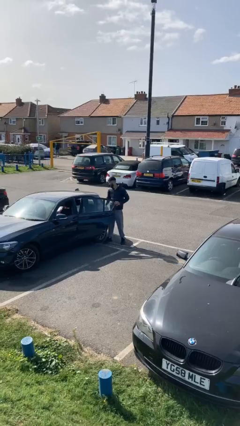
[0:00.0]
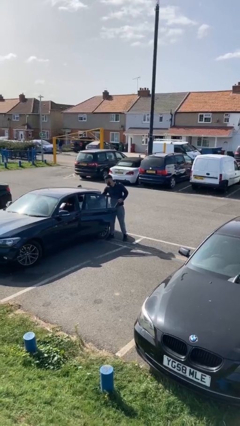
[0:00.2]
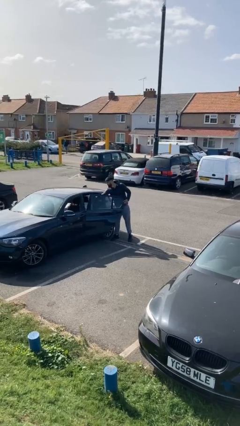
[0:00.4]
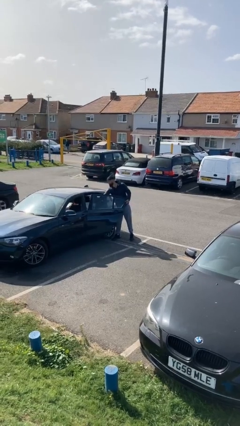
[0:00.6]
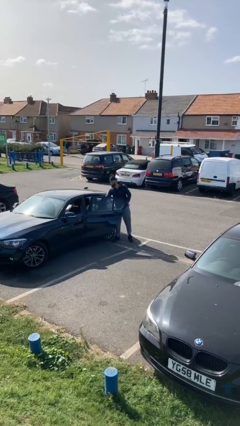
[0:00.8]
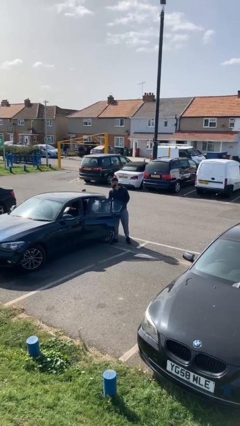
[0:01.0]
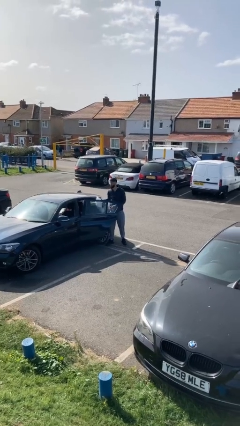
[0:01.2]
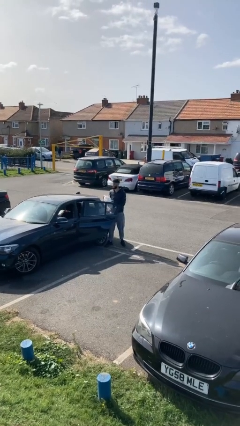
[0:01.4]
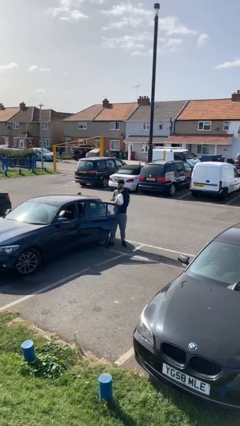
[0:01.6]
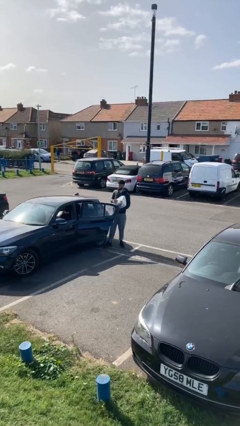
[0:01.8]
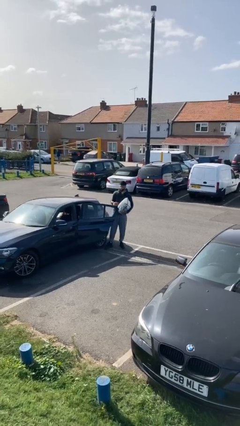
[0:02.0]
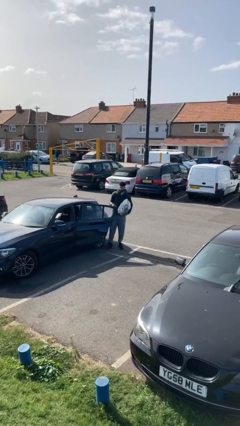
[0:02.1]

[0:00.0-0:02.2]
person unloads car

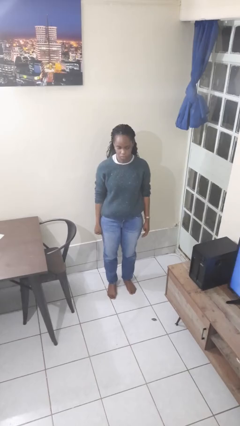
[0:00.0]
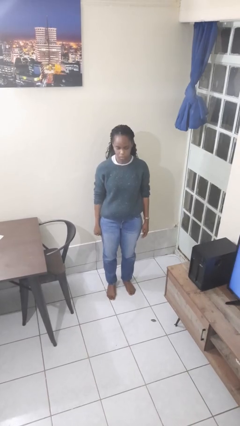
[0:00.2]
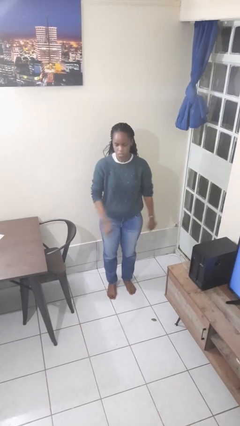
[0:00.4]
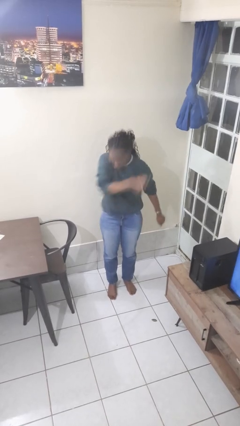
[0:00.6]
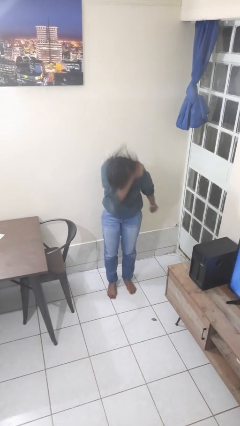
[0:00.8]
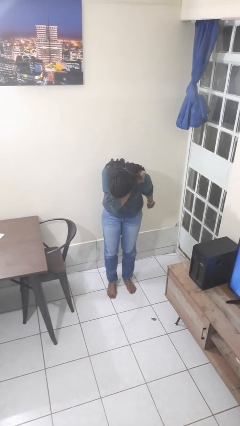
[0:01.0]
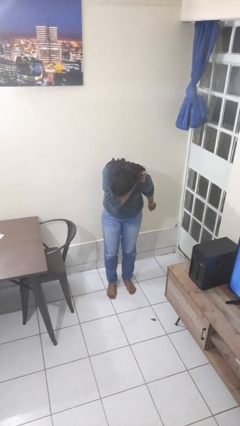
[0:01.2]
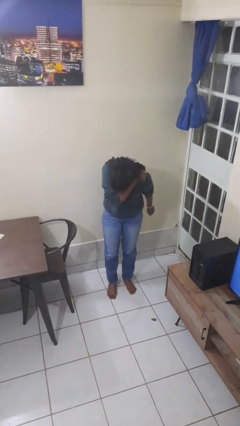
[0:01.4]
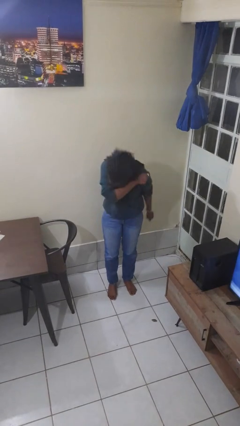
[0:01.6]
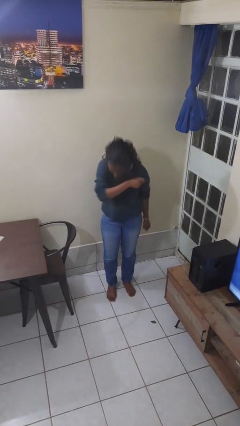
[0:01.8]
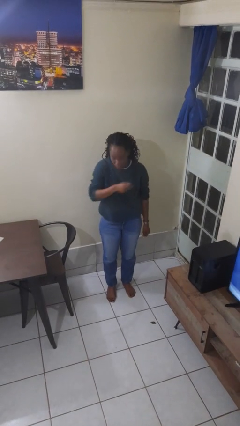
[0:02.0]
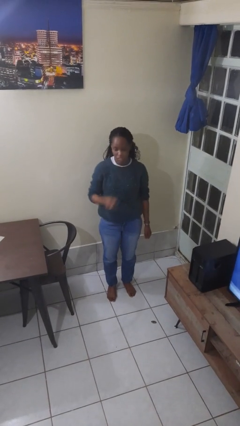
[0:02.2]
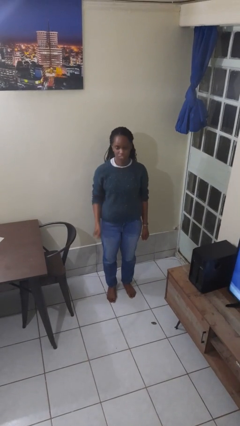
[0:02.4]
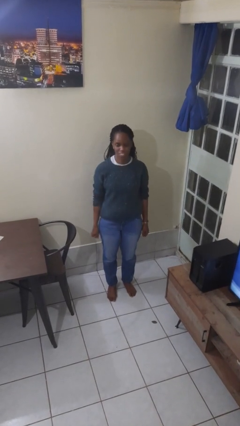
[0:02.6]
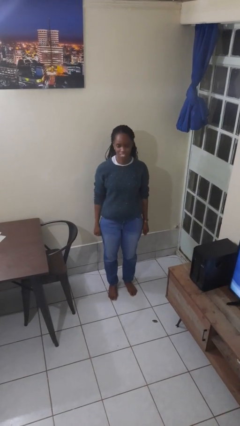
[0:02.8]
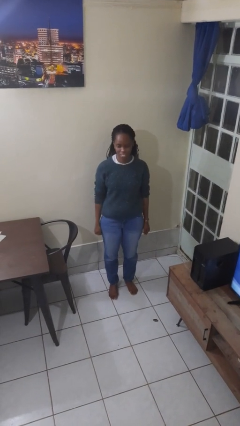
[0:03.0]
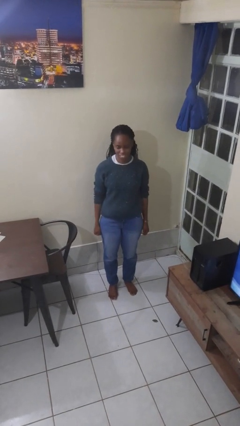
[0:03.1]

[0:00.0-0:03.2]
person sneezes into arm

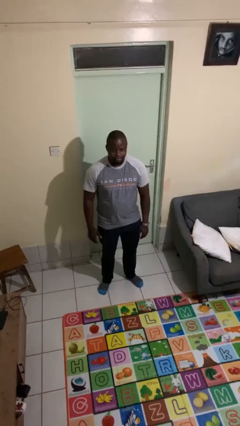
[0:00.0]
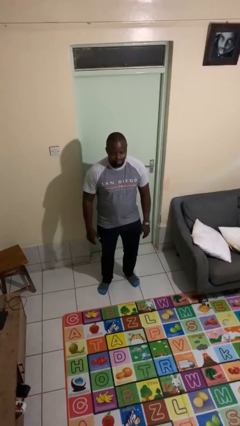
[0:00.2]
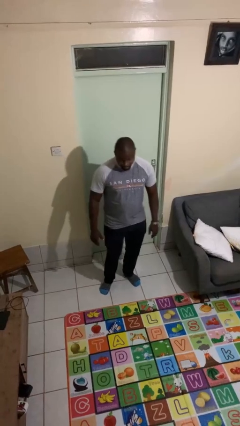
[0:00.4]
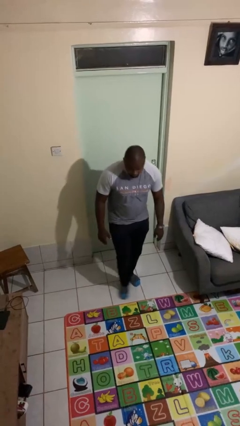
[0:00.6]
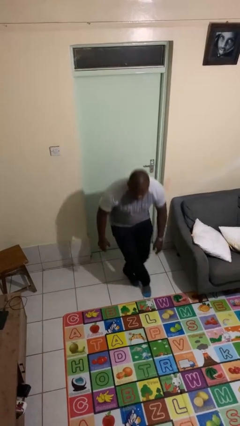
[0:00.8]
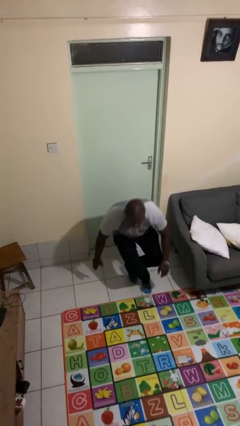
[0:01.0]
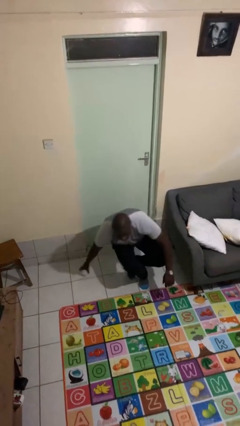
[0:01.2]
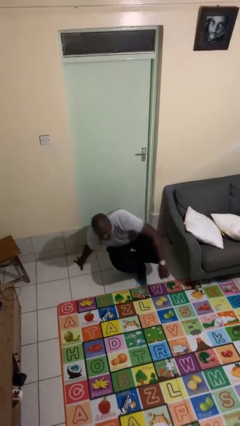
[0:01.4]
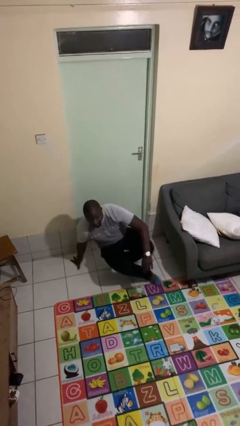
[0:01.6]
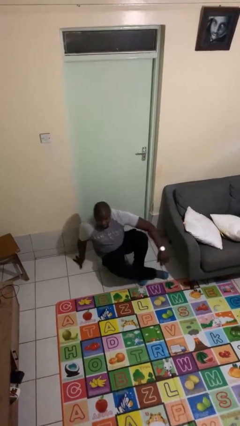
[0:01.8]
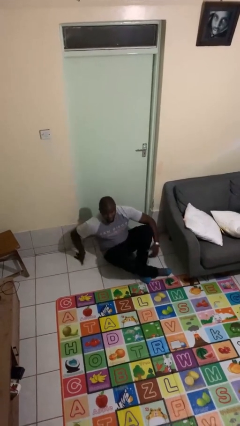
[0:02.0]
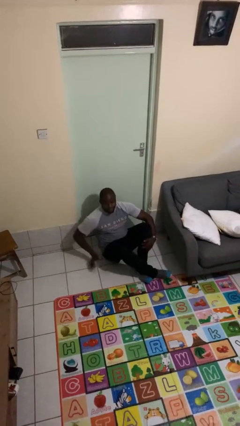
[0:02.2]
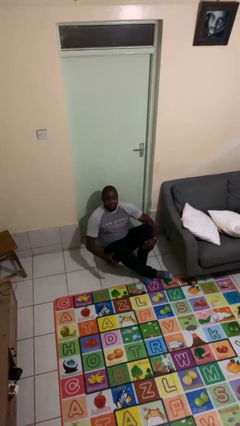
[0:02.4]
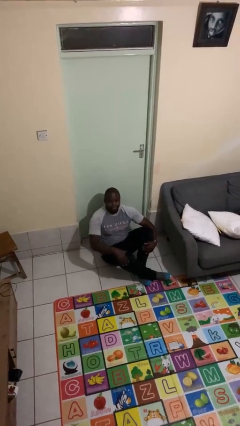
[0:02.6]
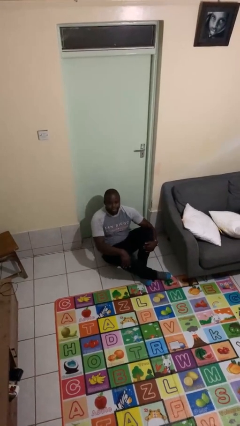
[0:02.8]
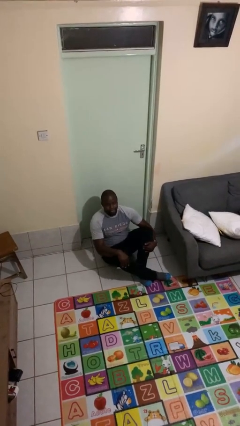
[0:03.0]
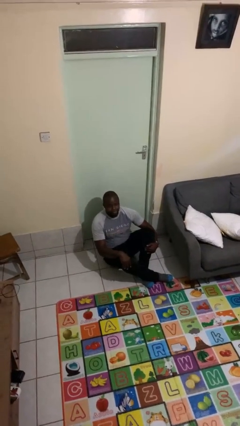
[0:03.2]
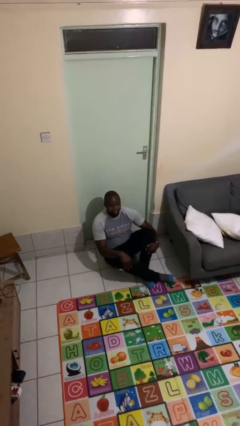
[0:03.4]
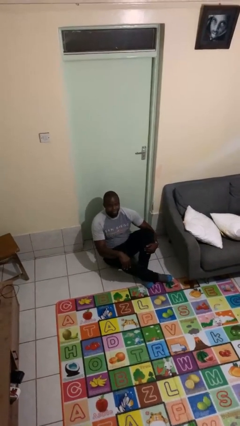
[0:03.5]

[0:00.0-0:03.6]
person sits crisscross

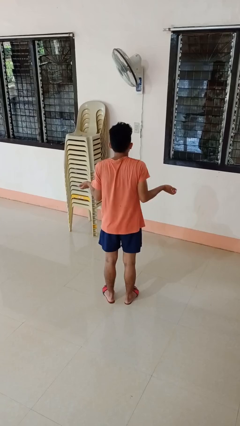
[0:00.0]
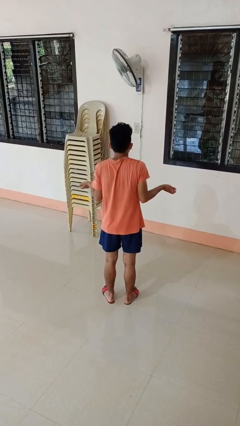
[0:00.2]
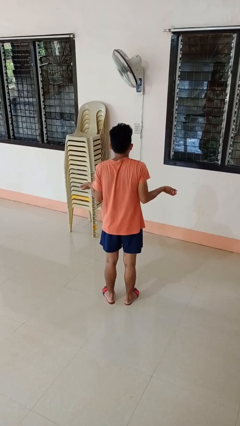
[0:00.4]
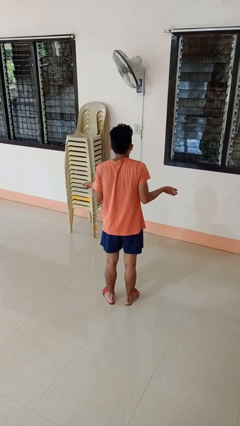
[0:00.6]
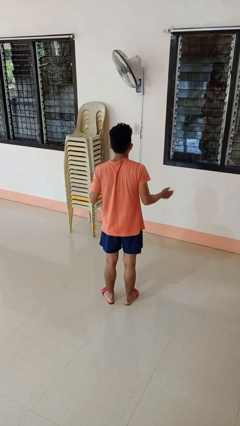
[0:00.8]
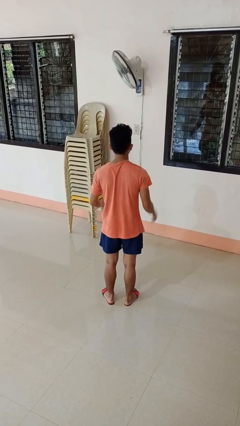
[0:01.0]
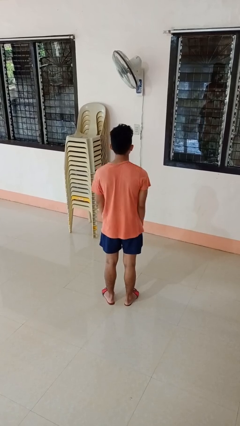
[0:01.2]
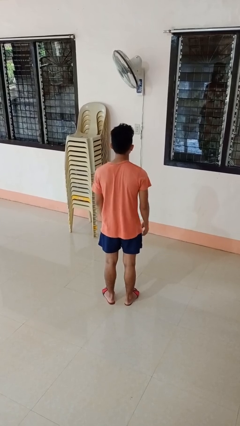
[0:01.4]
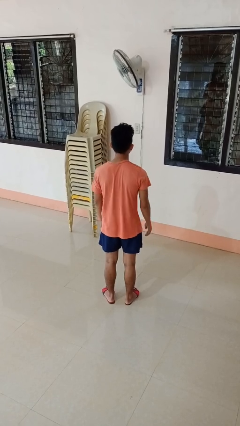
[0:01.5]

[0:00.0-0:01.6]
person shrugs

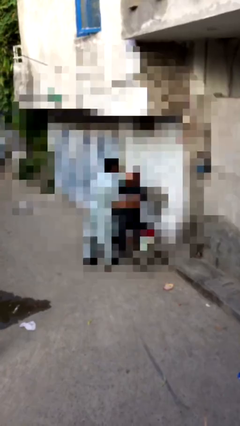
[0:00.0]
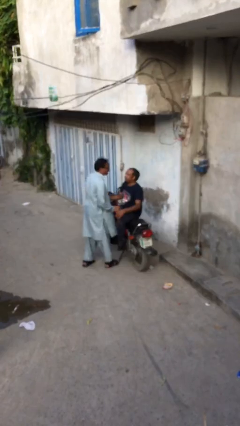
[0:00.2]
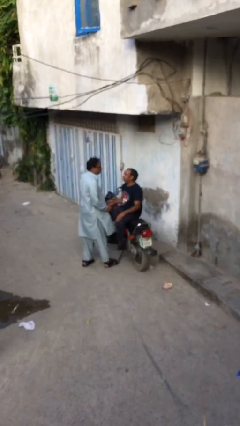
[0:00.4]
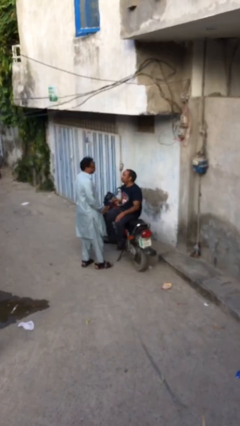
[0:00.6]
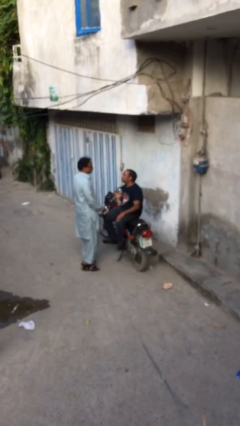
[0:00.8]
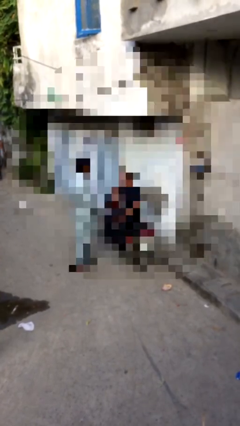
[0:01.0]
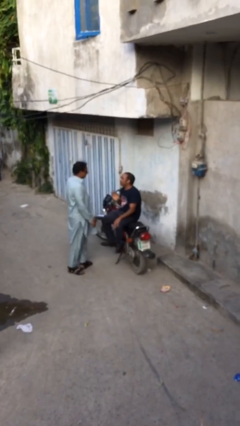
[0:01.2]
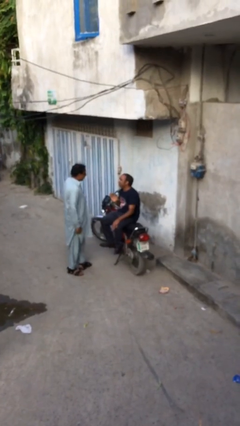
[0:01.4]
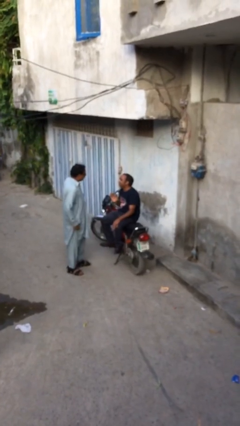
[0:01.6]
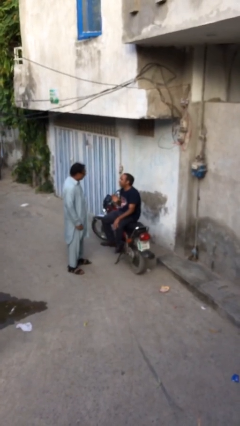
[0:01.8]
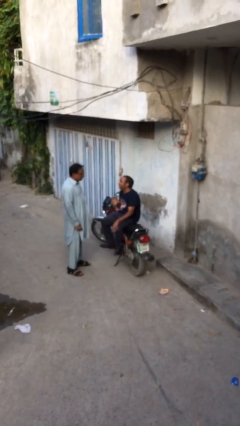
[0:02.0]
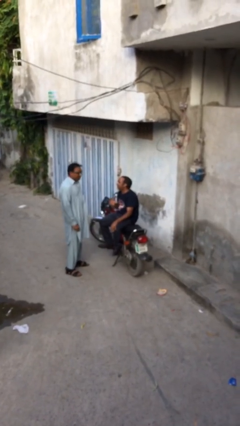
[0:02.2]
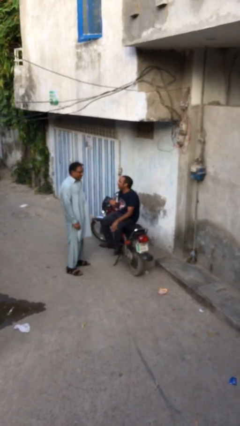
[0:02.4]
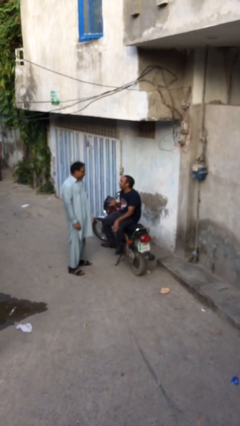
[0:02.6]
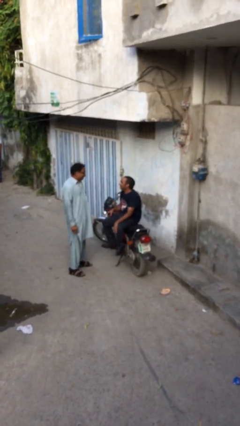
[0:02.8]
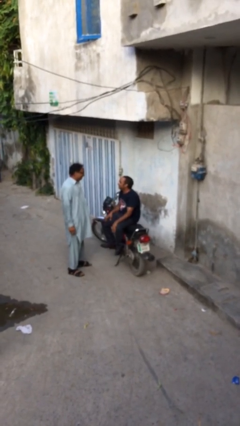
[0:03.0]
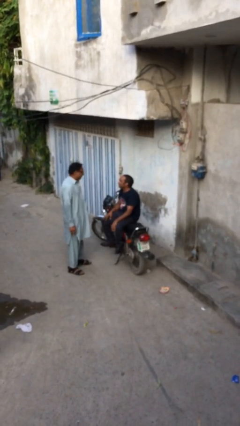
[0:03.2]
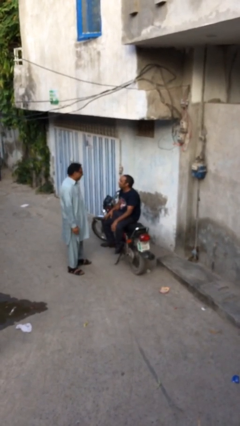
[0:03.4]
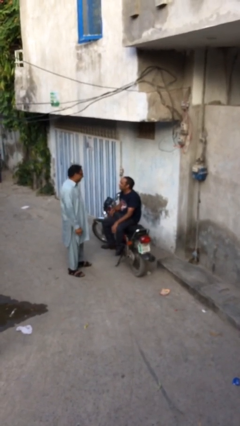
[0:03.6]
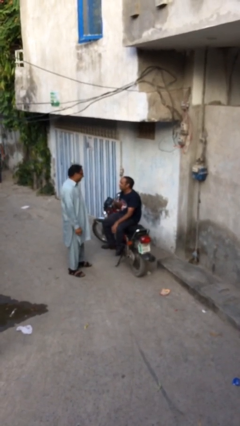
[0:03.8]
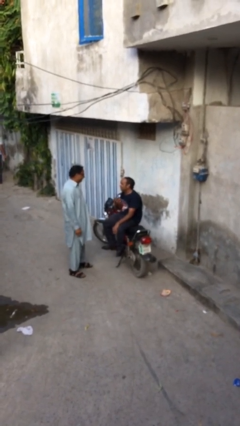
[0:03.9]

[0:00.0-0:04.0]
person talks to person

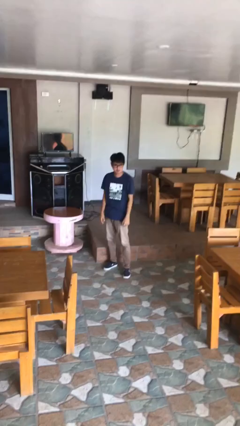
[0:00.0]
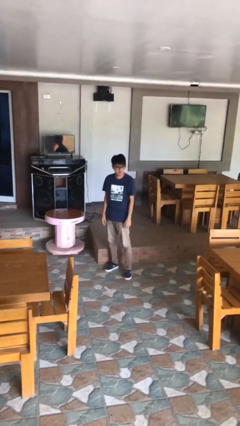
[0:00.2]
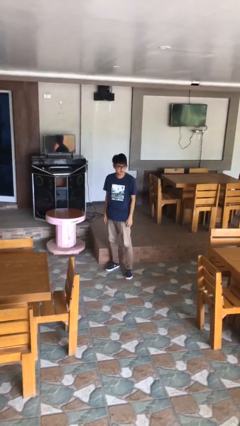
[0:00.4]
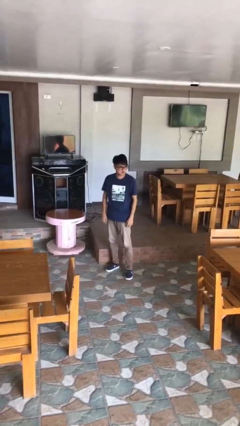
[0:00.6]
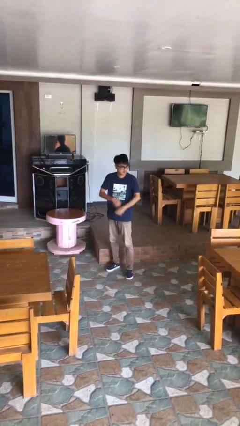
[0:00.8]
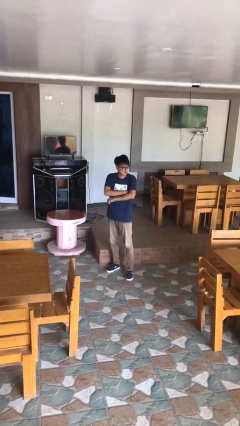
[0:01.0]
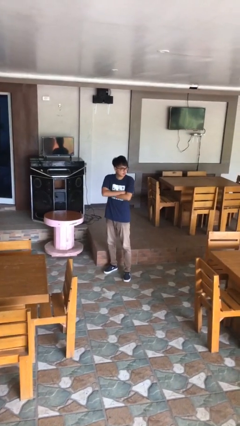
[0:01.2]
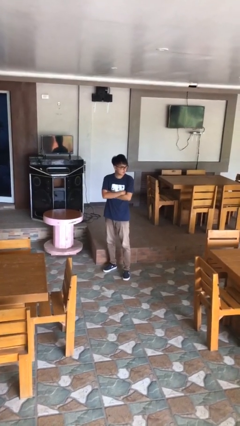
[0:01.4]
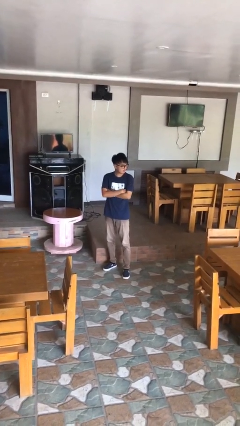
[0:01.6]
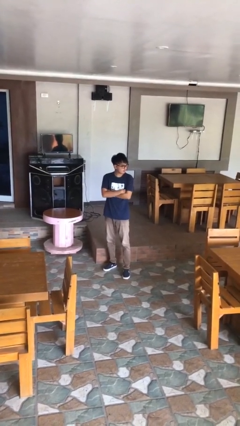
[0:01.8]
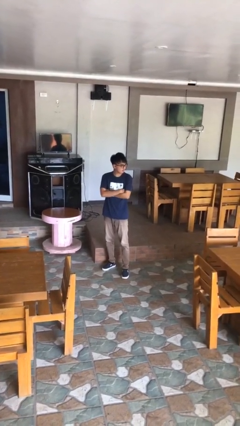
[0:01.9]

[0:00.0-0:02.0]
person crosses arms

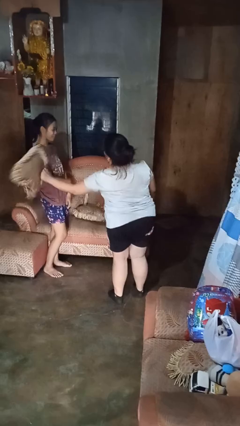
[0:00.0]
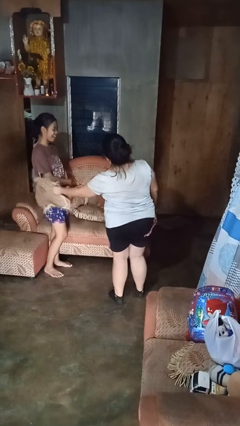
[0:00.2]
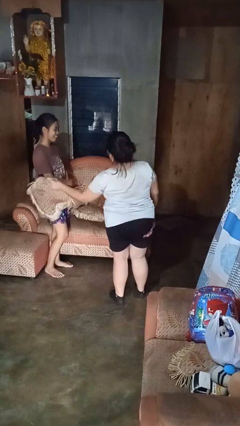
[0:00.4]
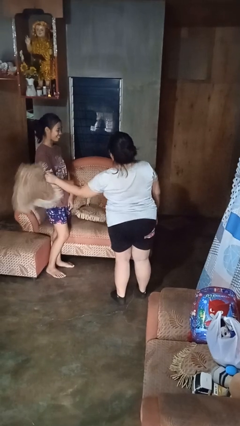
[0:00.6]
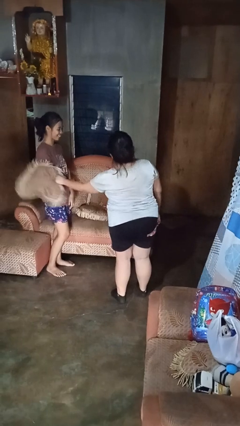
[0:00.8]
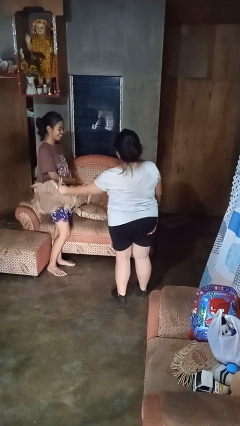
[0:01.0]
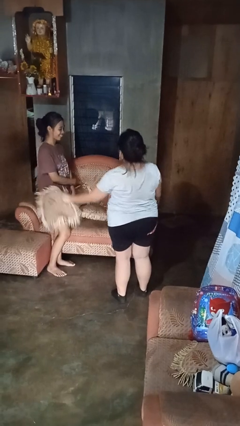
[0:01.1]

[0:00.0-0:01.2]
person hits person with pillow
